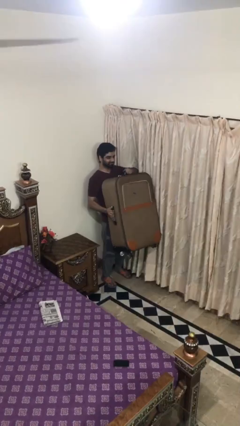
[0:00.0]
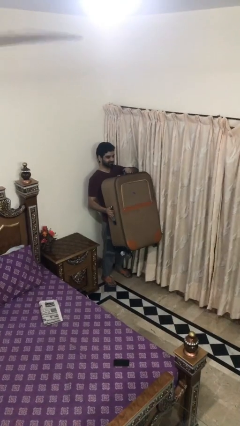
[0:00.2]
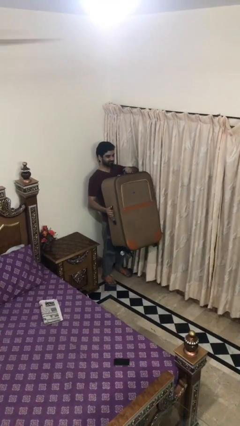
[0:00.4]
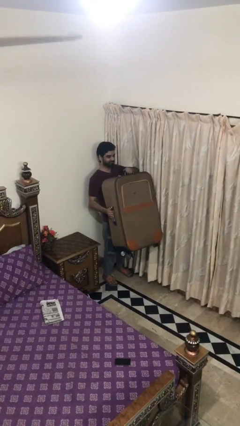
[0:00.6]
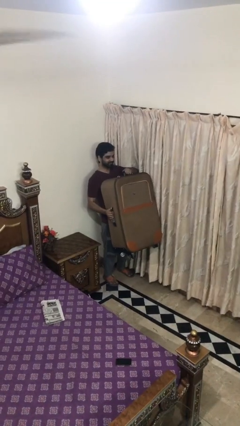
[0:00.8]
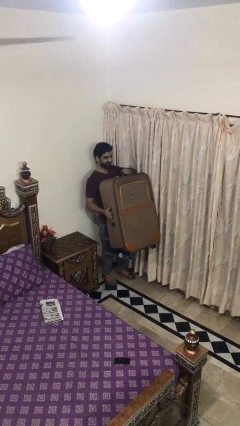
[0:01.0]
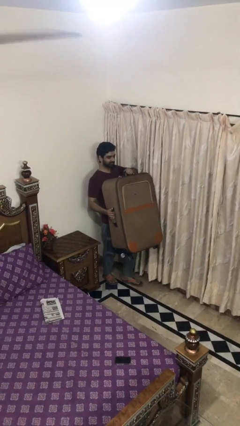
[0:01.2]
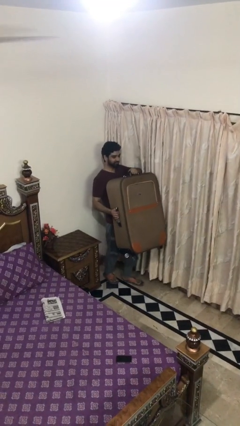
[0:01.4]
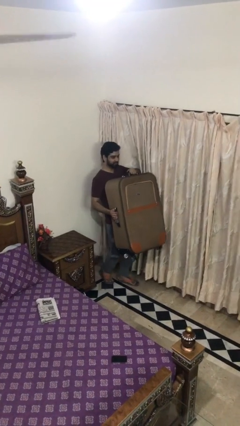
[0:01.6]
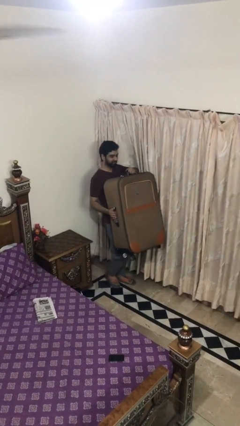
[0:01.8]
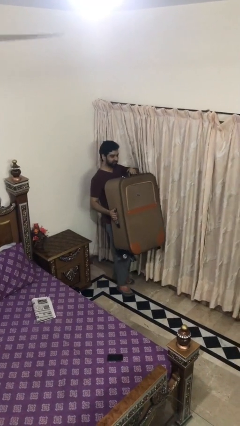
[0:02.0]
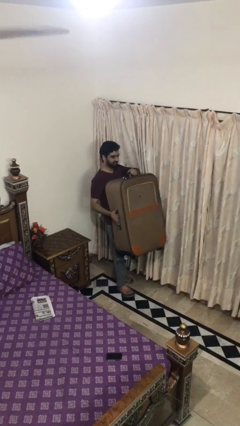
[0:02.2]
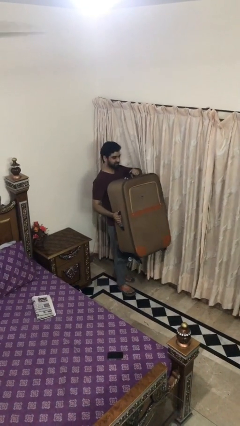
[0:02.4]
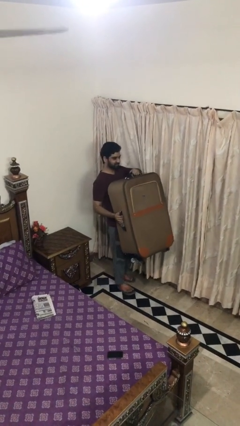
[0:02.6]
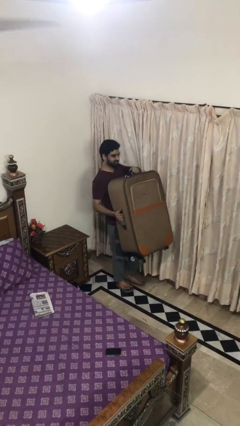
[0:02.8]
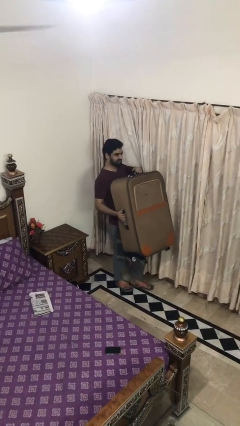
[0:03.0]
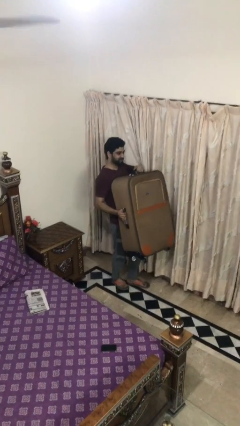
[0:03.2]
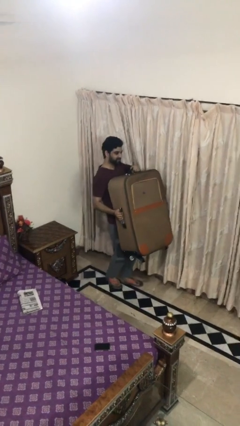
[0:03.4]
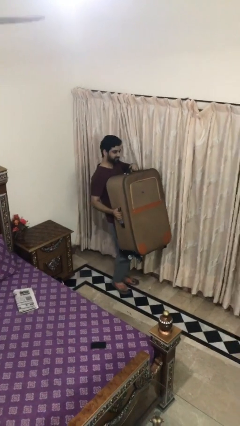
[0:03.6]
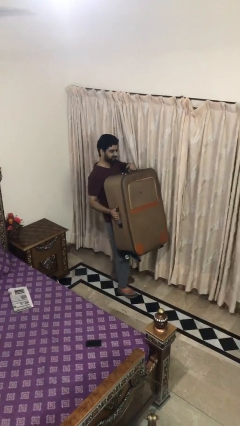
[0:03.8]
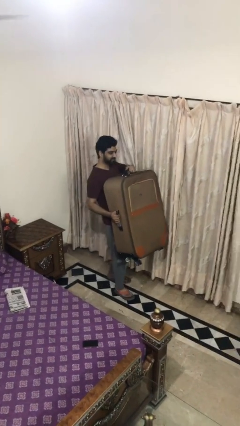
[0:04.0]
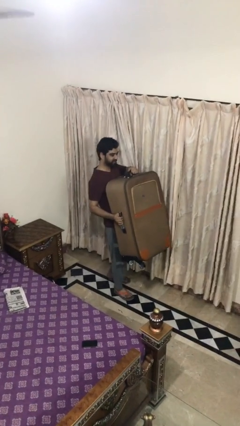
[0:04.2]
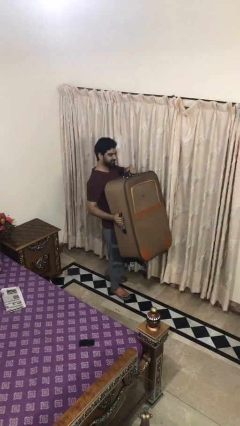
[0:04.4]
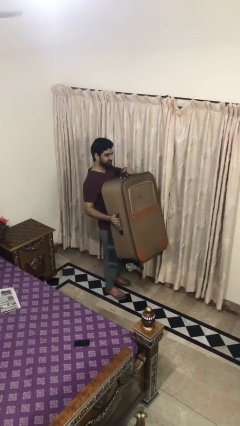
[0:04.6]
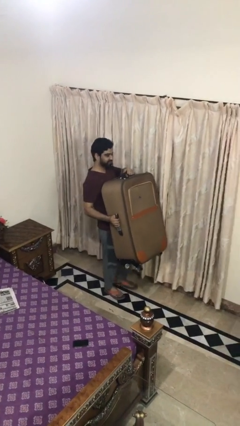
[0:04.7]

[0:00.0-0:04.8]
person carries heavy object

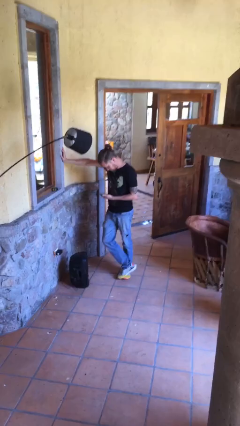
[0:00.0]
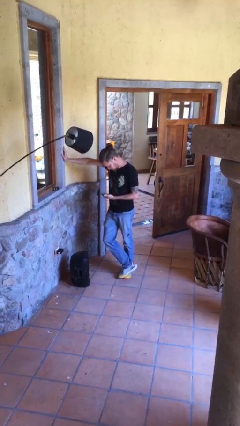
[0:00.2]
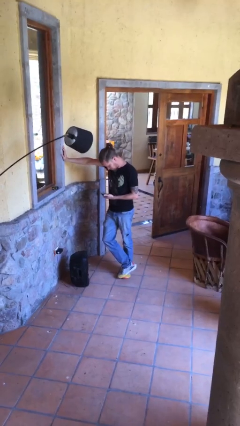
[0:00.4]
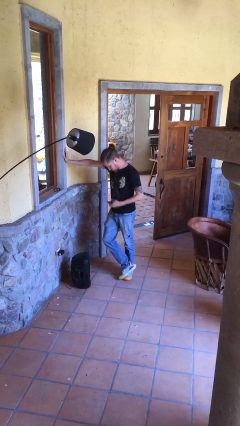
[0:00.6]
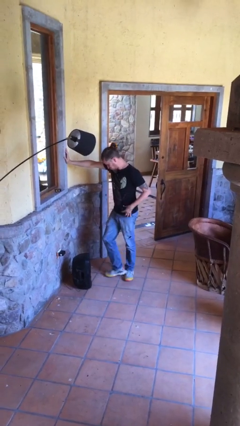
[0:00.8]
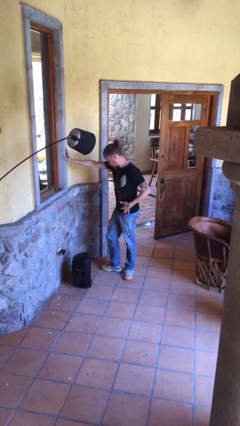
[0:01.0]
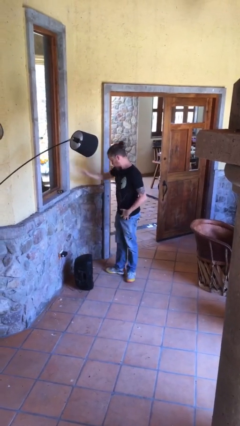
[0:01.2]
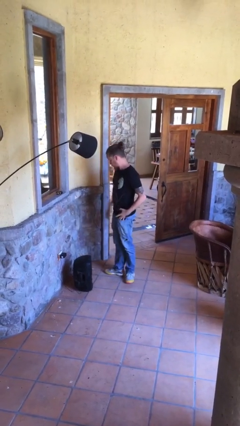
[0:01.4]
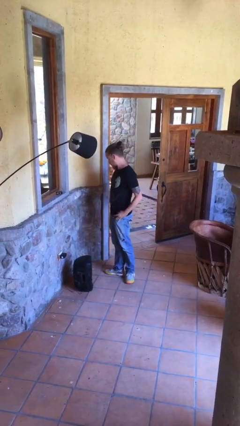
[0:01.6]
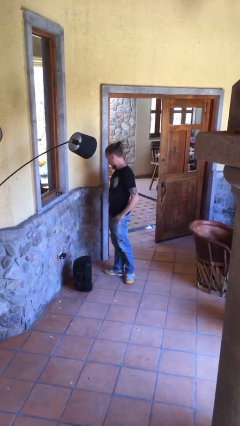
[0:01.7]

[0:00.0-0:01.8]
person puts phone into pocket

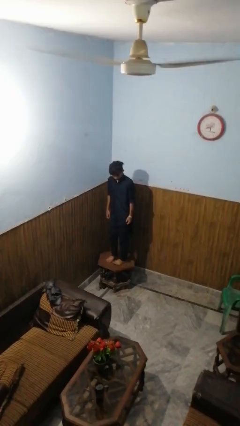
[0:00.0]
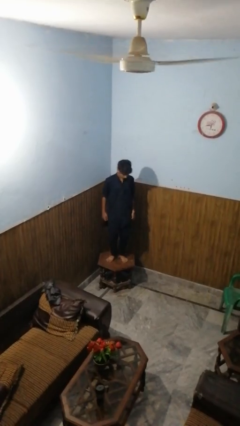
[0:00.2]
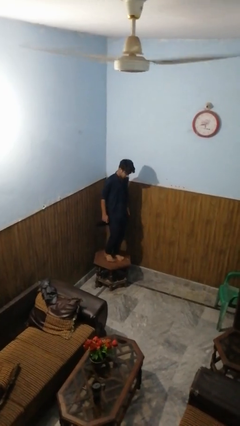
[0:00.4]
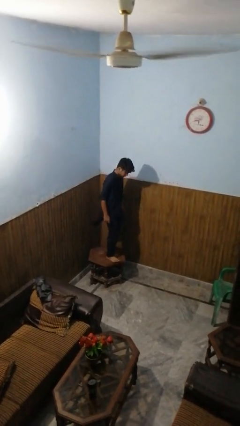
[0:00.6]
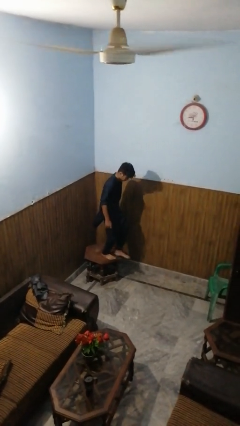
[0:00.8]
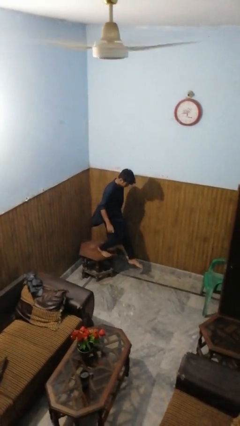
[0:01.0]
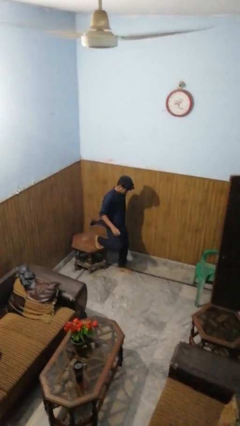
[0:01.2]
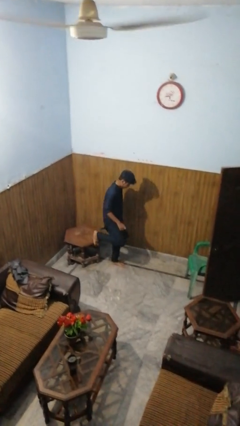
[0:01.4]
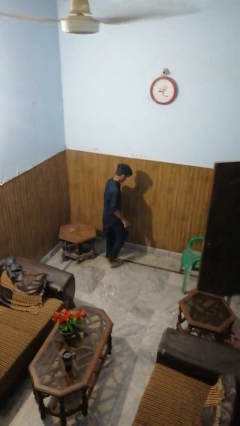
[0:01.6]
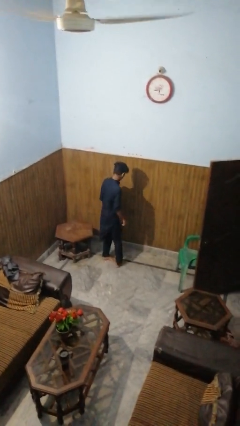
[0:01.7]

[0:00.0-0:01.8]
person climbs off table

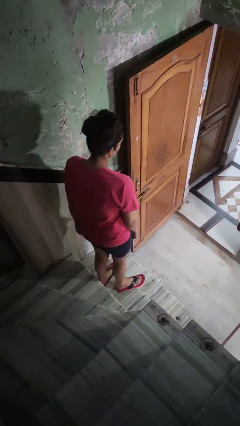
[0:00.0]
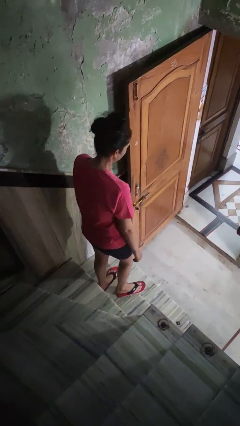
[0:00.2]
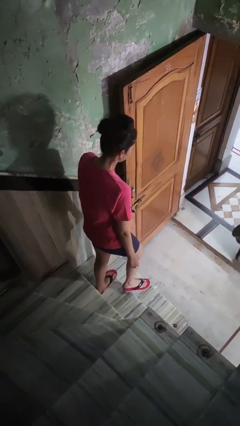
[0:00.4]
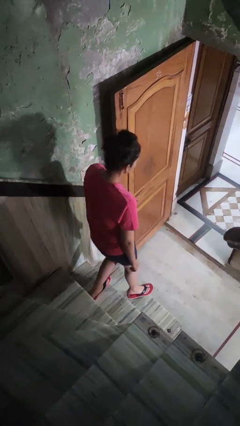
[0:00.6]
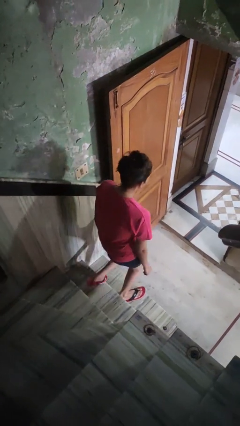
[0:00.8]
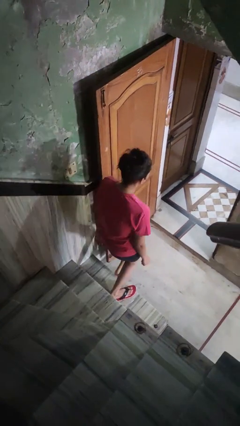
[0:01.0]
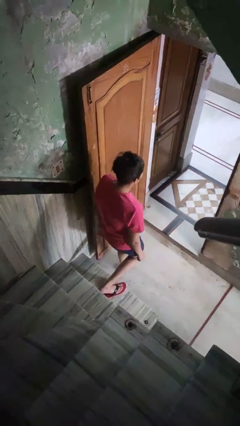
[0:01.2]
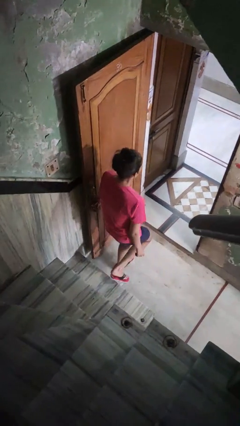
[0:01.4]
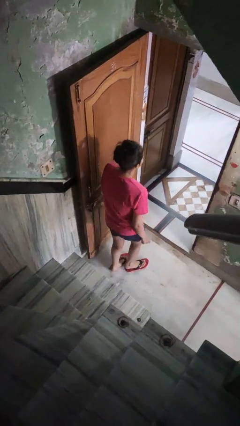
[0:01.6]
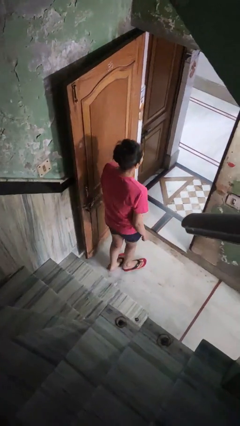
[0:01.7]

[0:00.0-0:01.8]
person climbs down stairs

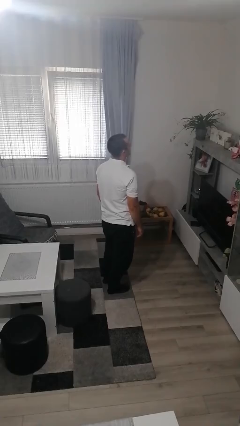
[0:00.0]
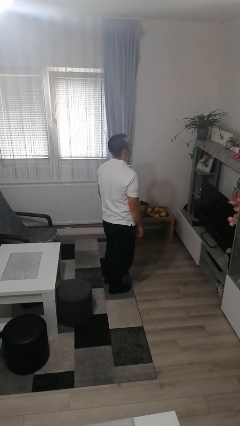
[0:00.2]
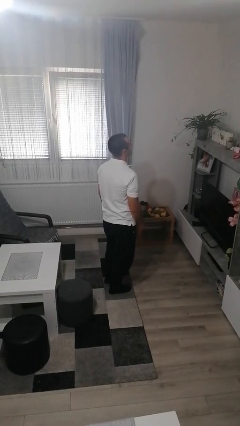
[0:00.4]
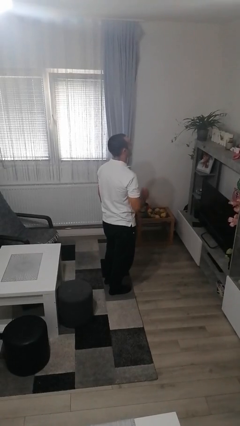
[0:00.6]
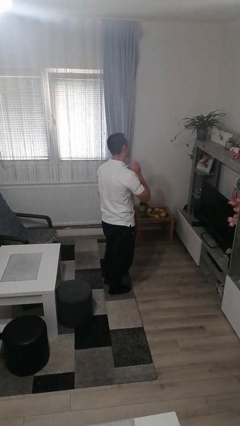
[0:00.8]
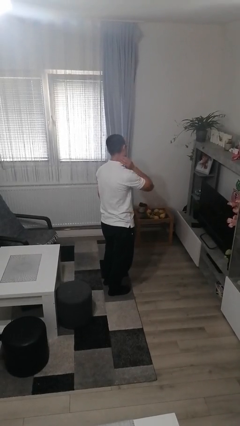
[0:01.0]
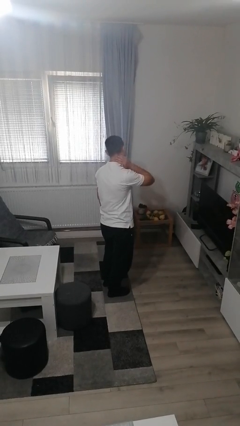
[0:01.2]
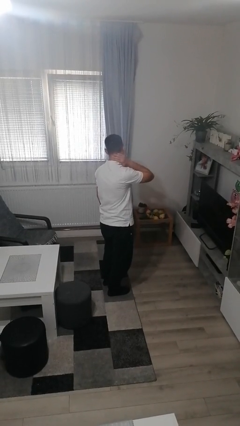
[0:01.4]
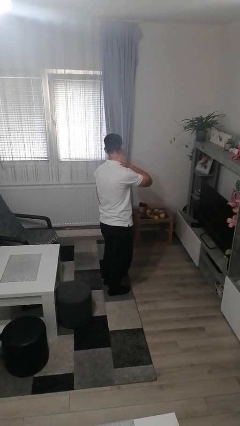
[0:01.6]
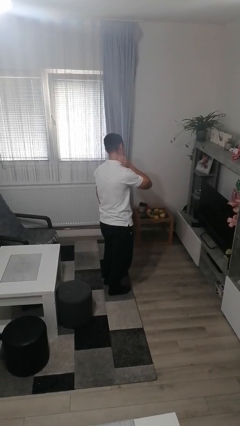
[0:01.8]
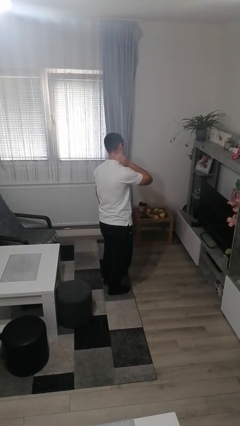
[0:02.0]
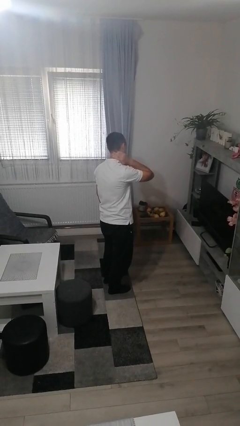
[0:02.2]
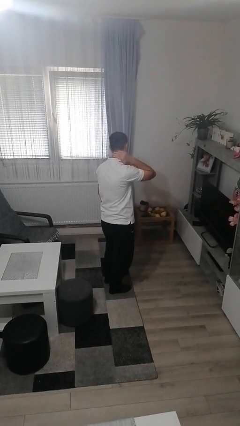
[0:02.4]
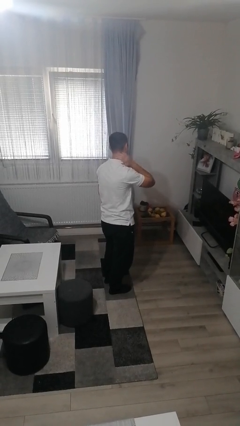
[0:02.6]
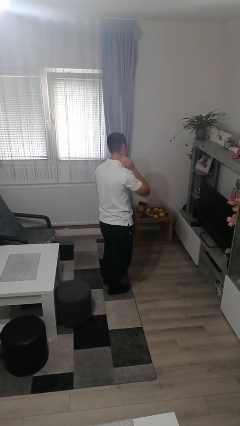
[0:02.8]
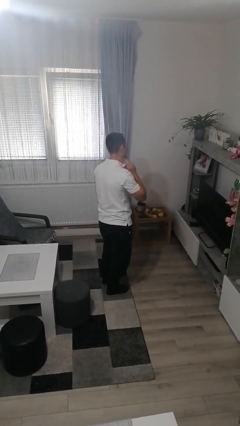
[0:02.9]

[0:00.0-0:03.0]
person rubs neck

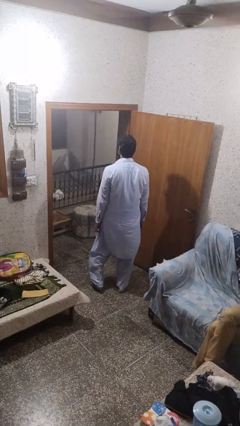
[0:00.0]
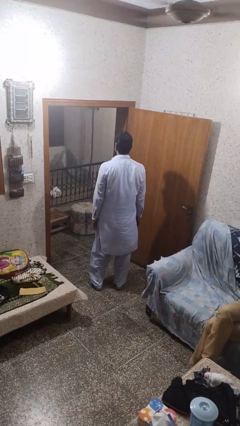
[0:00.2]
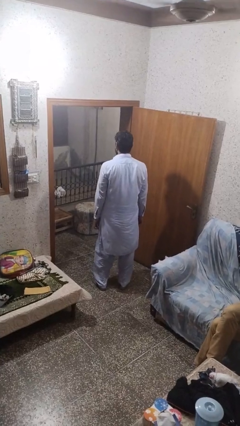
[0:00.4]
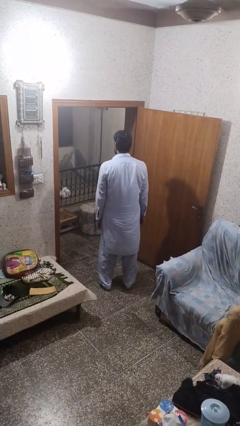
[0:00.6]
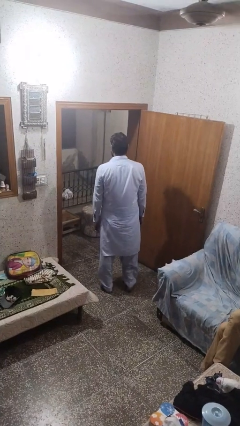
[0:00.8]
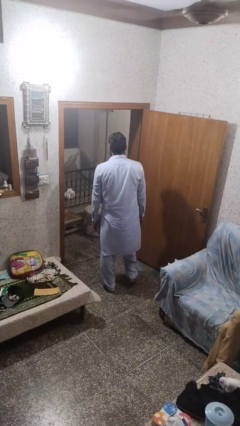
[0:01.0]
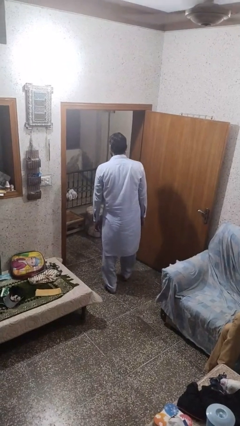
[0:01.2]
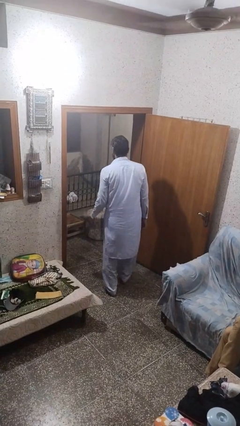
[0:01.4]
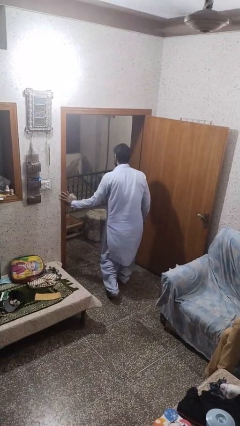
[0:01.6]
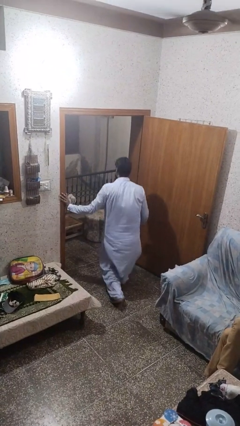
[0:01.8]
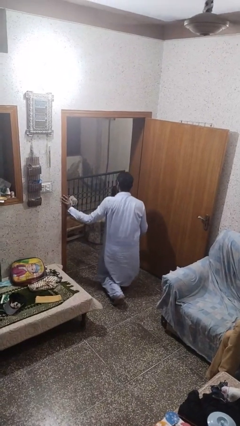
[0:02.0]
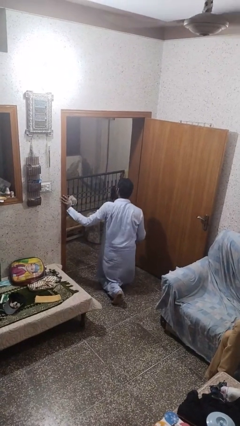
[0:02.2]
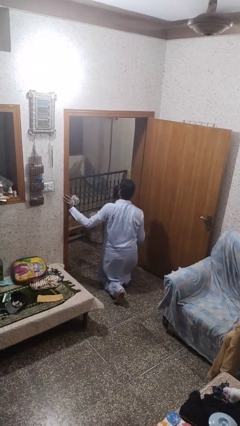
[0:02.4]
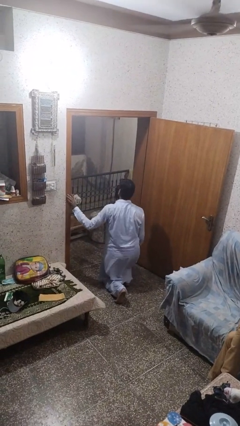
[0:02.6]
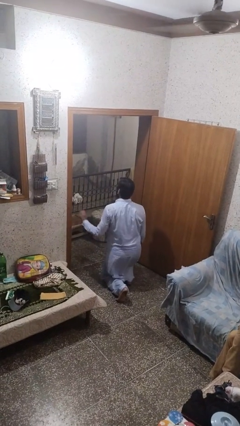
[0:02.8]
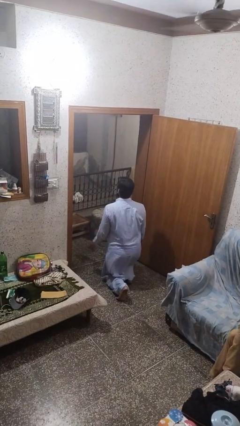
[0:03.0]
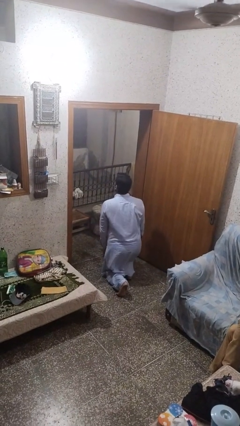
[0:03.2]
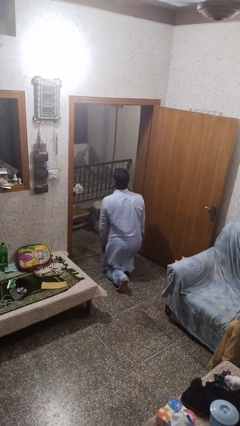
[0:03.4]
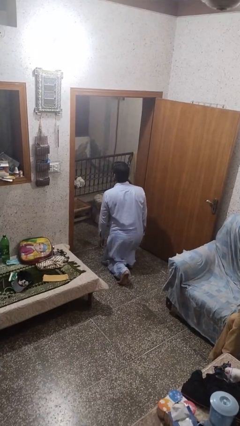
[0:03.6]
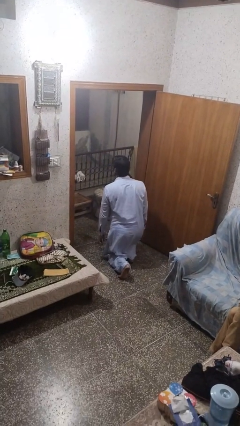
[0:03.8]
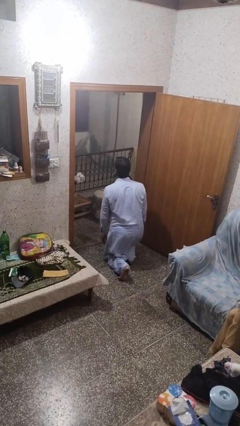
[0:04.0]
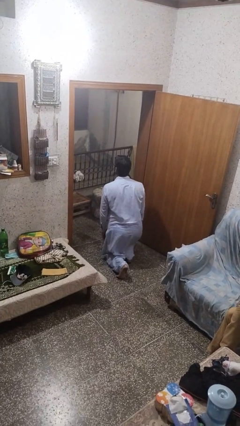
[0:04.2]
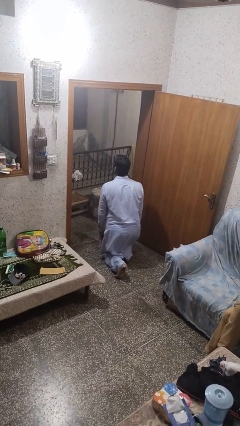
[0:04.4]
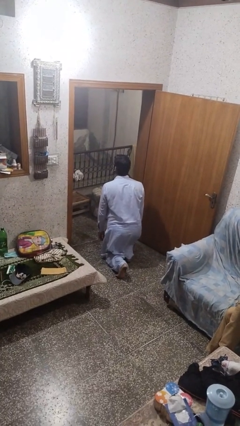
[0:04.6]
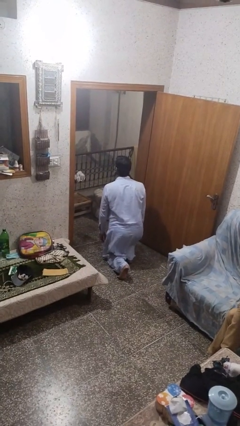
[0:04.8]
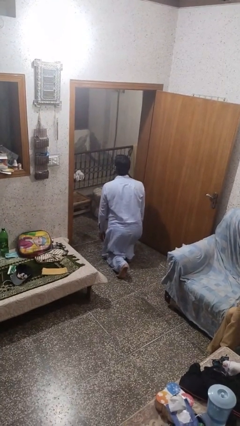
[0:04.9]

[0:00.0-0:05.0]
person kneels
